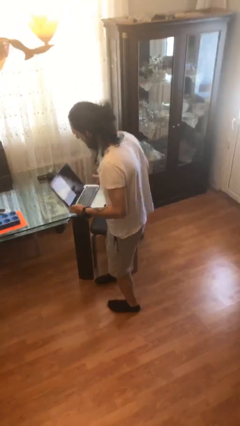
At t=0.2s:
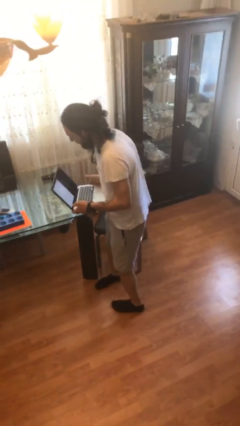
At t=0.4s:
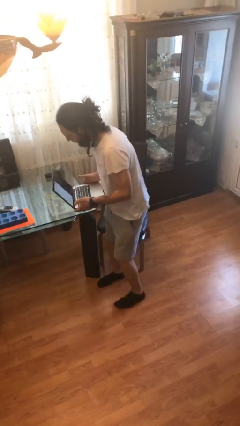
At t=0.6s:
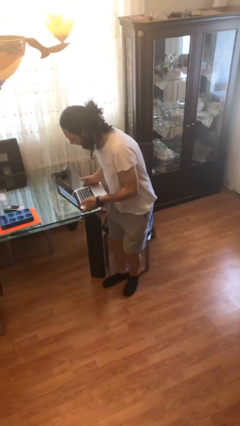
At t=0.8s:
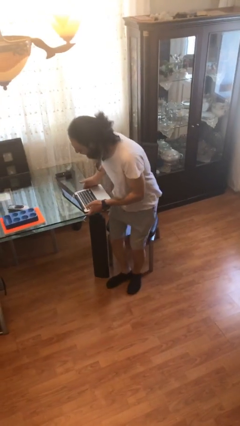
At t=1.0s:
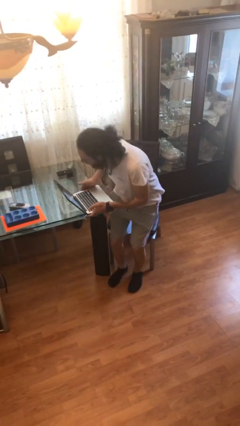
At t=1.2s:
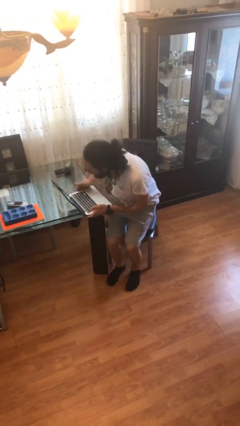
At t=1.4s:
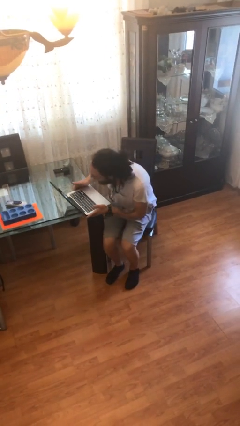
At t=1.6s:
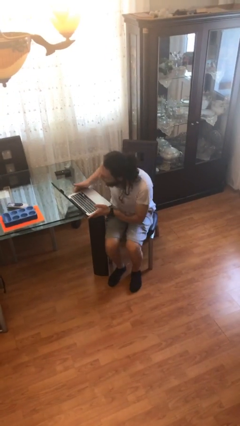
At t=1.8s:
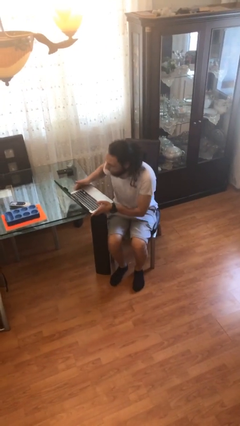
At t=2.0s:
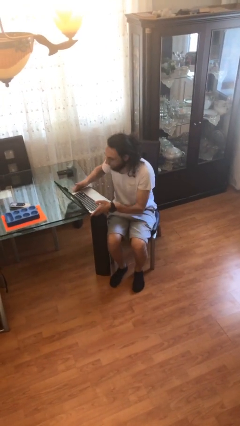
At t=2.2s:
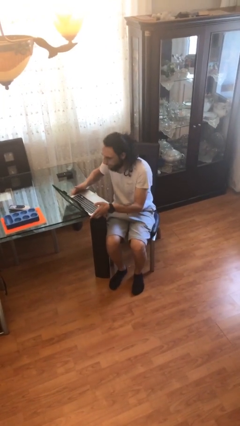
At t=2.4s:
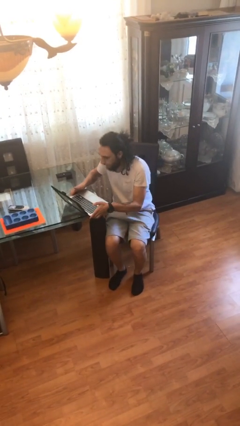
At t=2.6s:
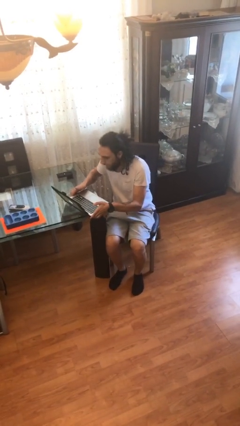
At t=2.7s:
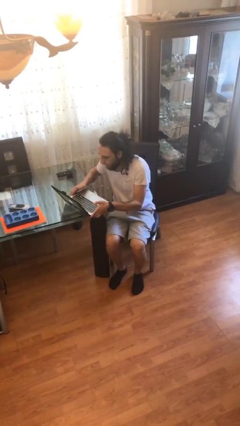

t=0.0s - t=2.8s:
person sits down

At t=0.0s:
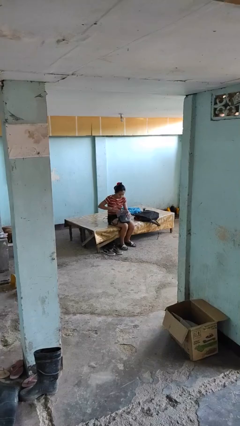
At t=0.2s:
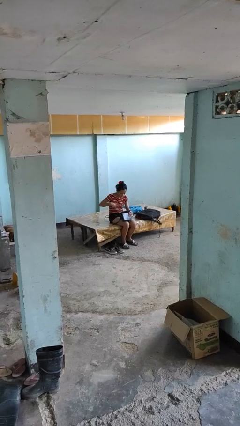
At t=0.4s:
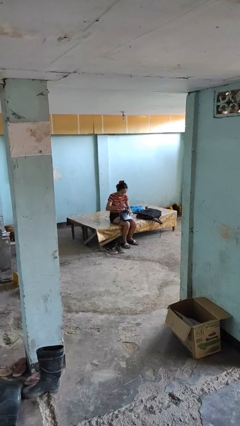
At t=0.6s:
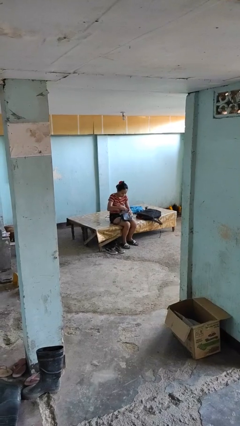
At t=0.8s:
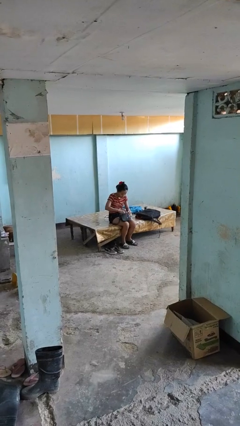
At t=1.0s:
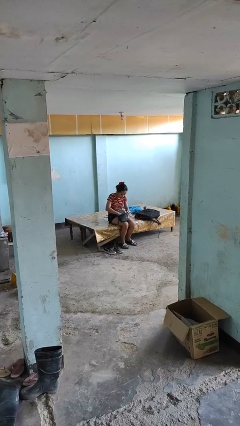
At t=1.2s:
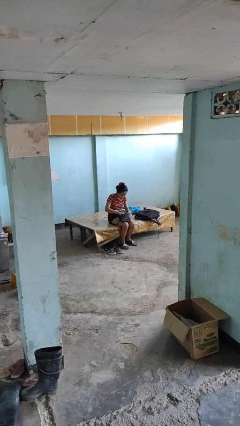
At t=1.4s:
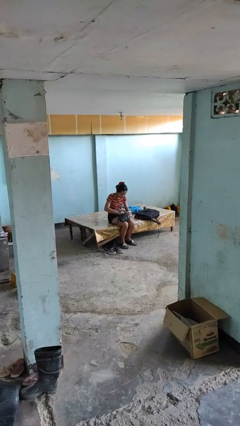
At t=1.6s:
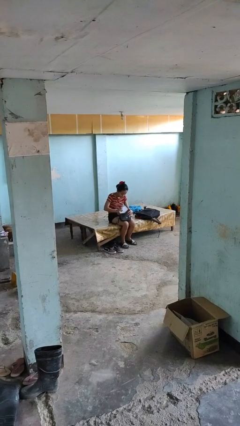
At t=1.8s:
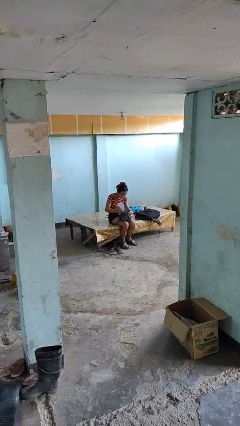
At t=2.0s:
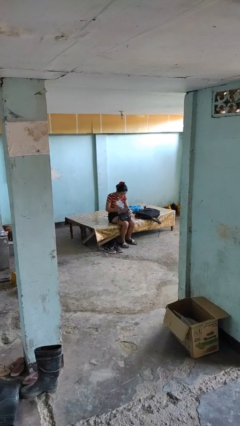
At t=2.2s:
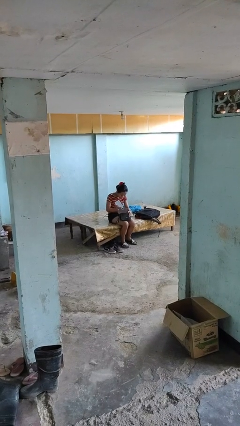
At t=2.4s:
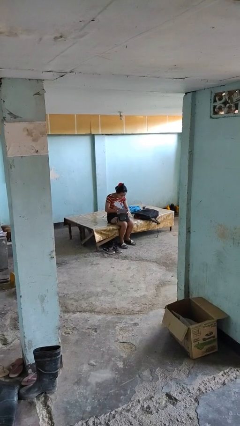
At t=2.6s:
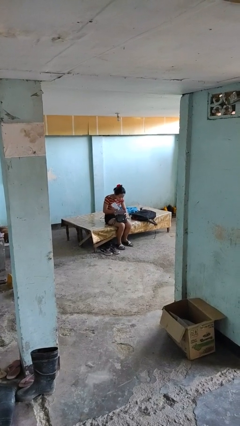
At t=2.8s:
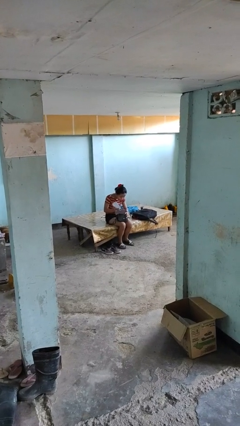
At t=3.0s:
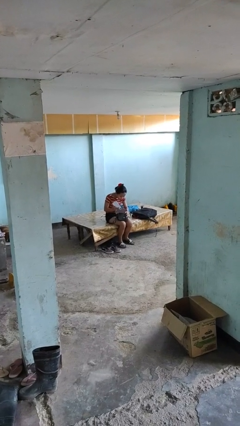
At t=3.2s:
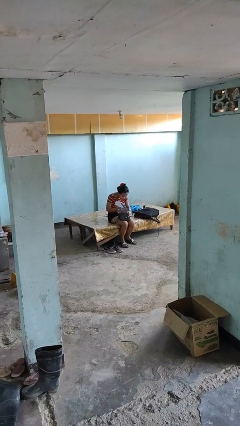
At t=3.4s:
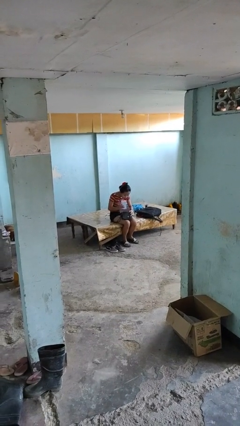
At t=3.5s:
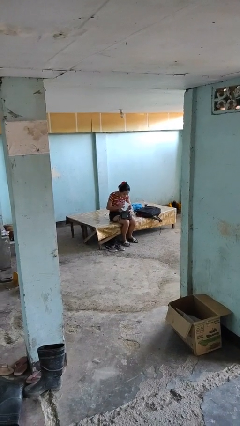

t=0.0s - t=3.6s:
person takes object from purse

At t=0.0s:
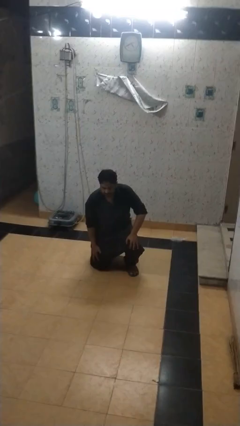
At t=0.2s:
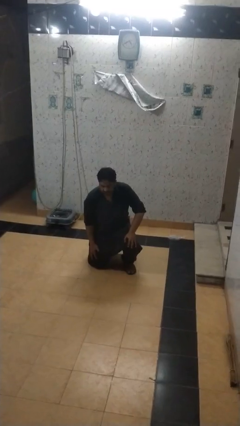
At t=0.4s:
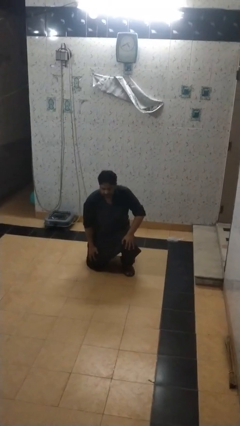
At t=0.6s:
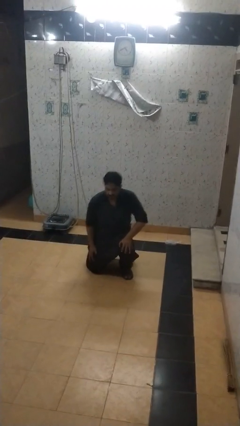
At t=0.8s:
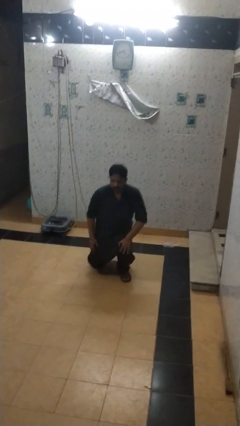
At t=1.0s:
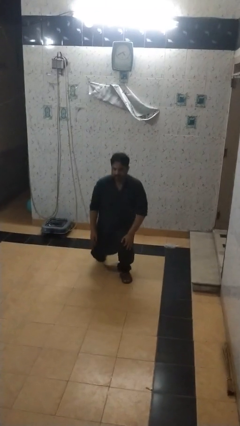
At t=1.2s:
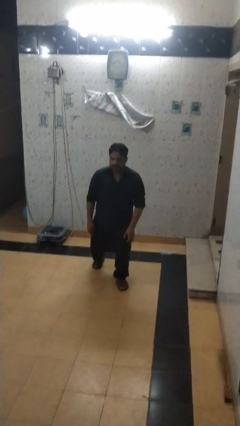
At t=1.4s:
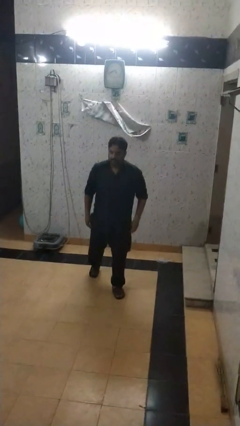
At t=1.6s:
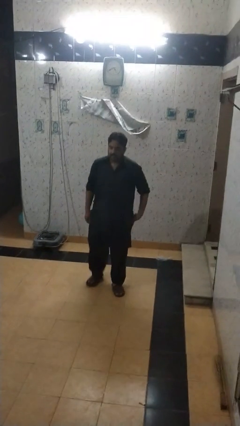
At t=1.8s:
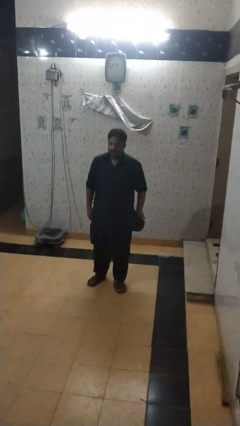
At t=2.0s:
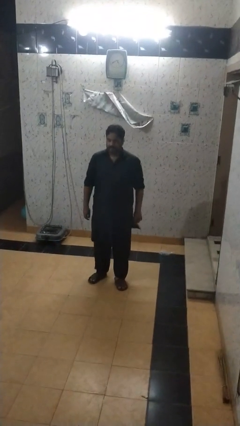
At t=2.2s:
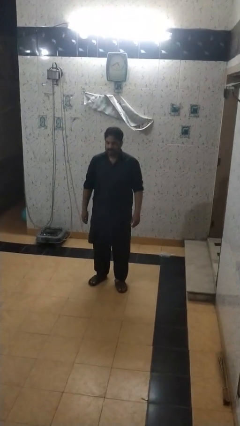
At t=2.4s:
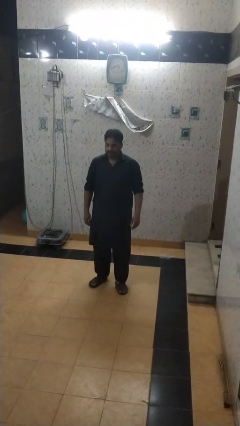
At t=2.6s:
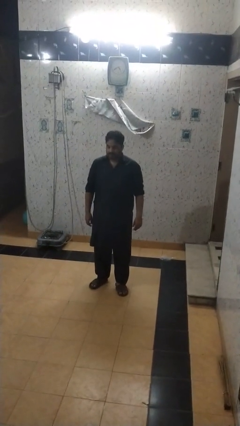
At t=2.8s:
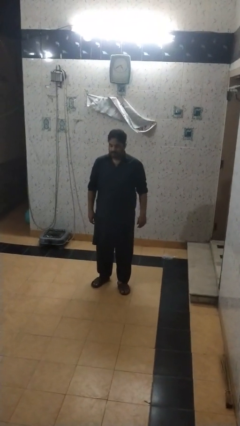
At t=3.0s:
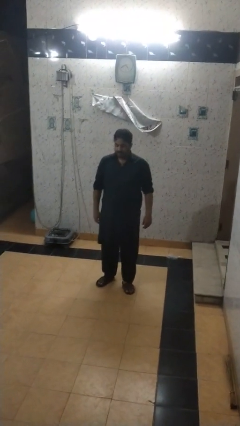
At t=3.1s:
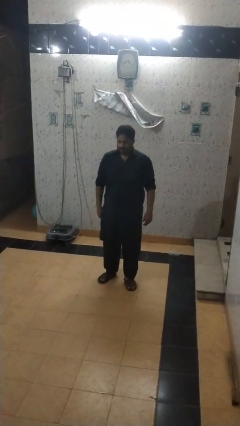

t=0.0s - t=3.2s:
person stands up from floor

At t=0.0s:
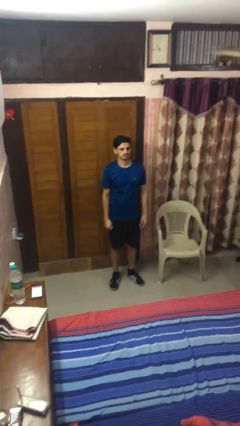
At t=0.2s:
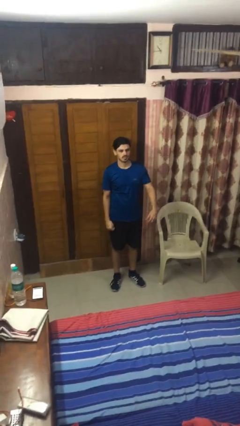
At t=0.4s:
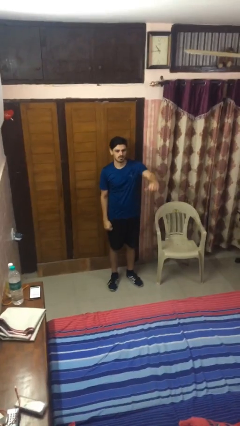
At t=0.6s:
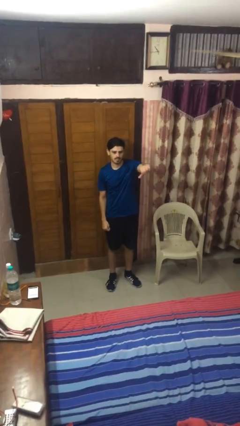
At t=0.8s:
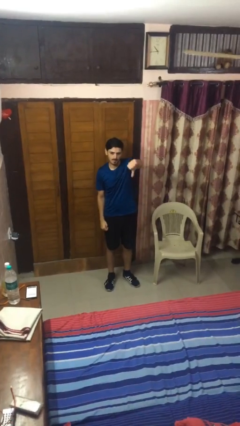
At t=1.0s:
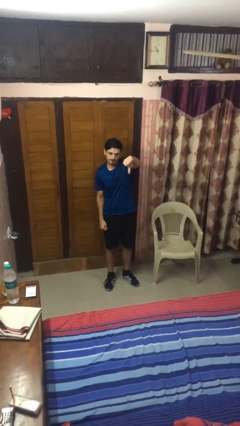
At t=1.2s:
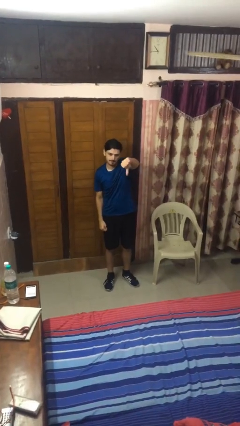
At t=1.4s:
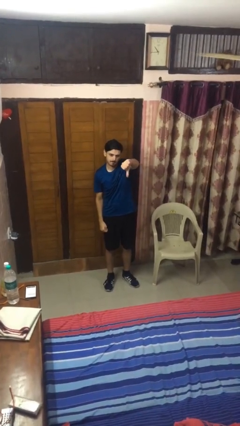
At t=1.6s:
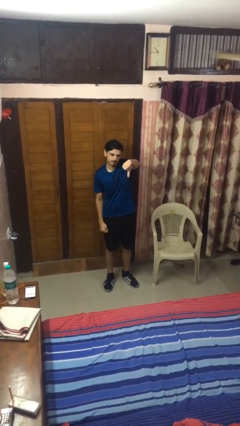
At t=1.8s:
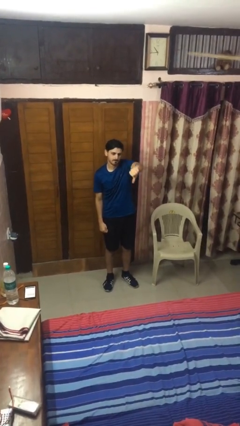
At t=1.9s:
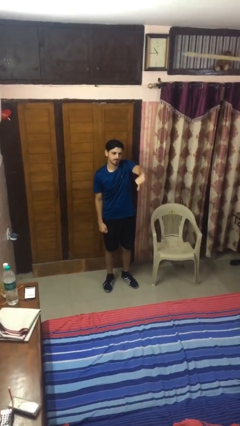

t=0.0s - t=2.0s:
person gestures thumbs down

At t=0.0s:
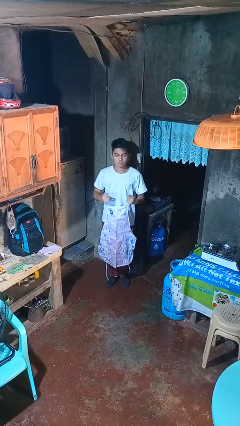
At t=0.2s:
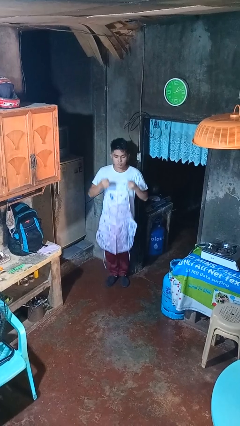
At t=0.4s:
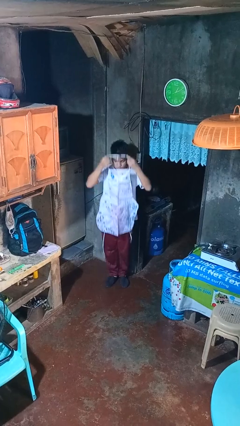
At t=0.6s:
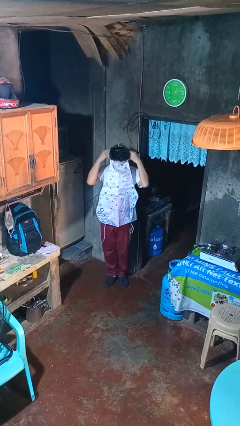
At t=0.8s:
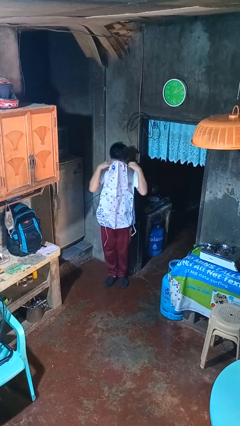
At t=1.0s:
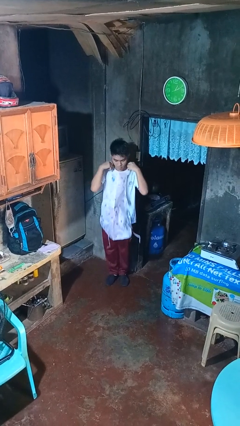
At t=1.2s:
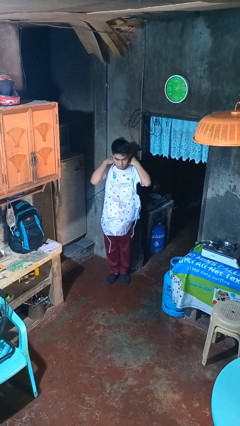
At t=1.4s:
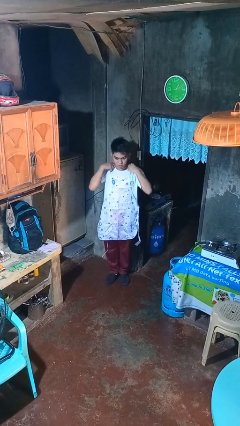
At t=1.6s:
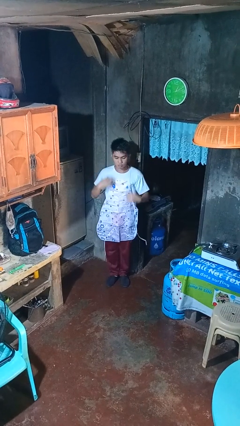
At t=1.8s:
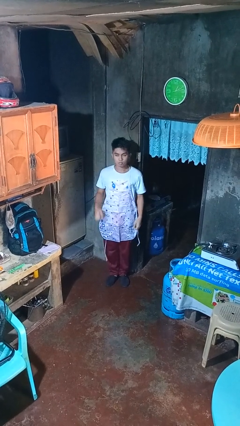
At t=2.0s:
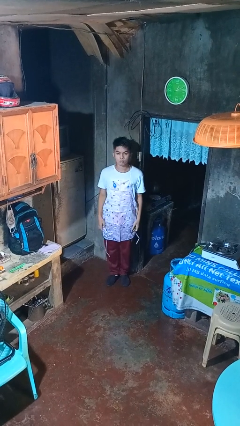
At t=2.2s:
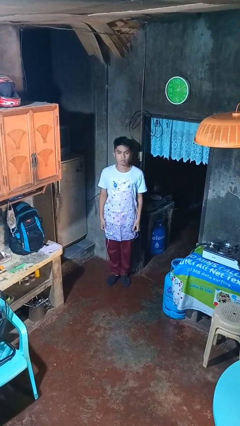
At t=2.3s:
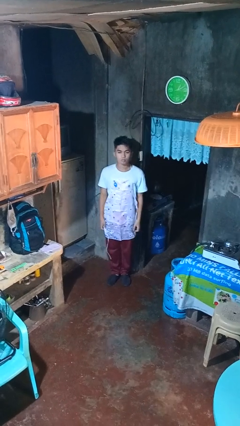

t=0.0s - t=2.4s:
person puts on apron

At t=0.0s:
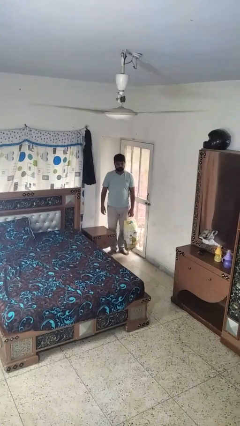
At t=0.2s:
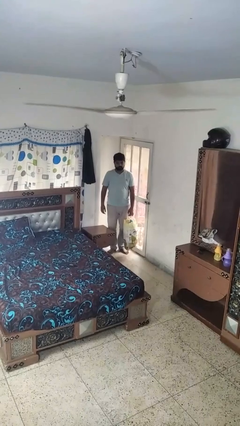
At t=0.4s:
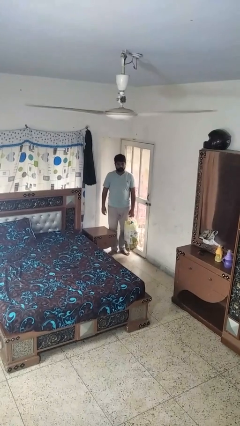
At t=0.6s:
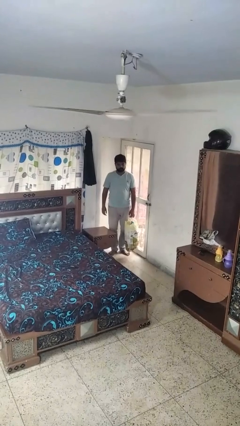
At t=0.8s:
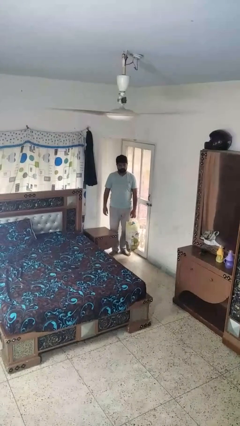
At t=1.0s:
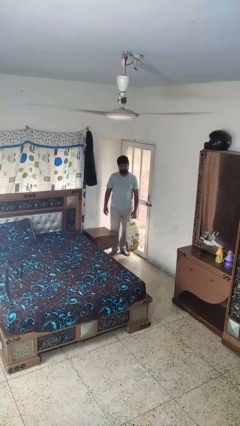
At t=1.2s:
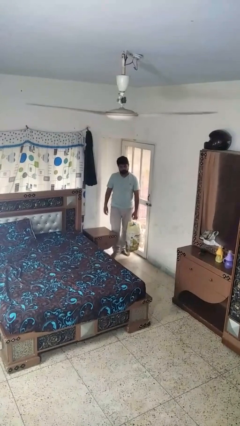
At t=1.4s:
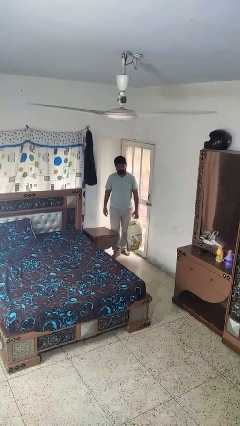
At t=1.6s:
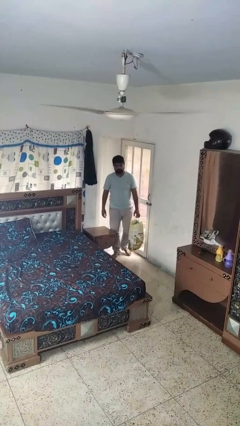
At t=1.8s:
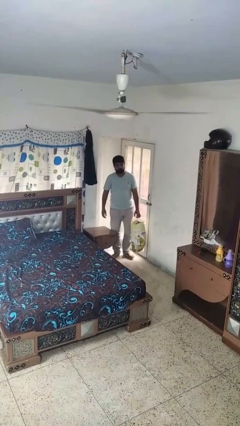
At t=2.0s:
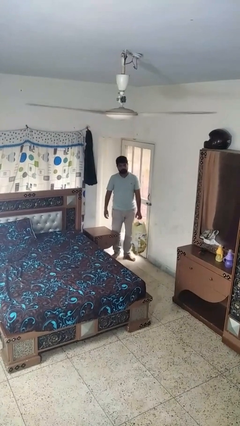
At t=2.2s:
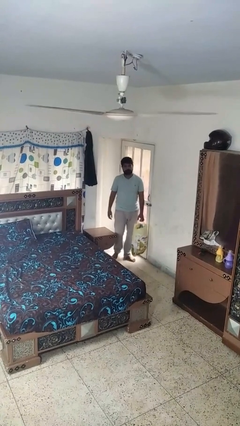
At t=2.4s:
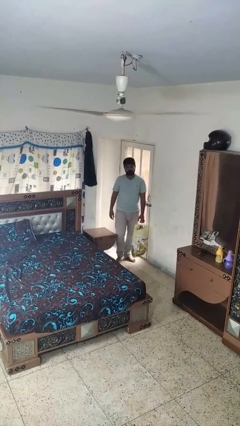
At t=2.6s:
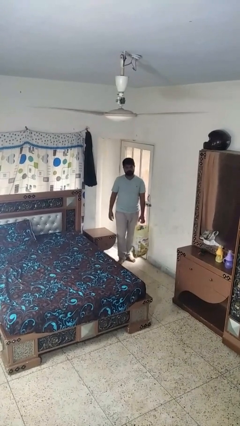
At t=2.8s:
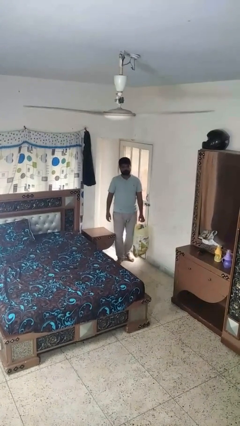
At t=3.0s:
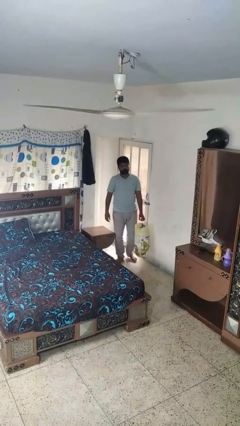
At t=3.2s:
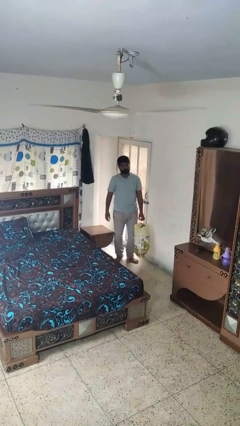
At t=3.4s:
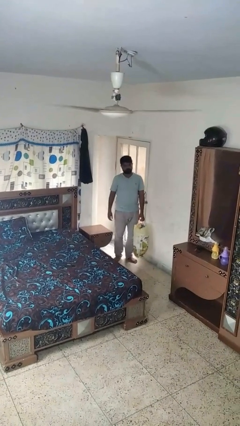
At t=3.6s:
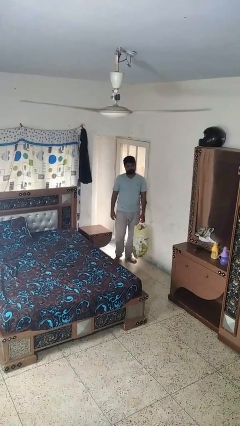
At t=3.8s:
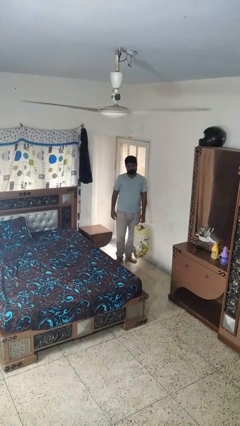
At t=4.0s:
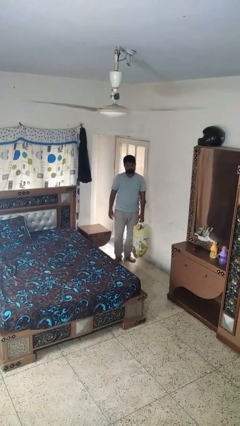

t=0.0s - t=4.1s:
person carries groceries
